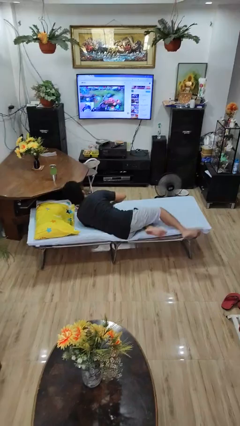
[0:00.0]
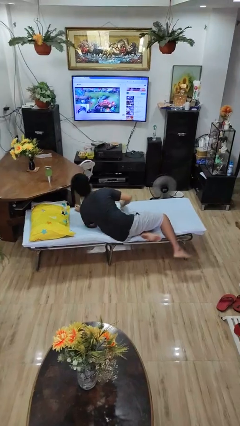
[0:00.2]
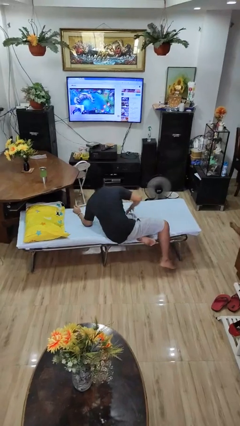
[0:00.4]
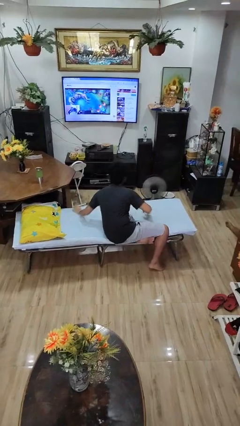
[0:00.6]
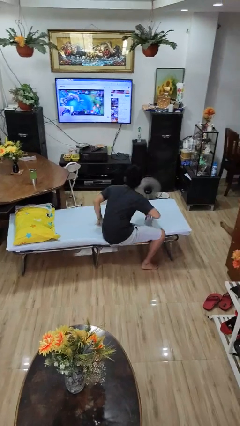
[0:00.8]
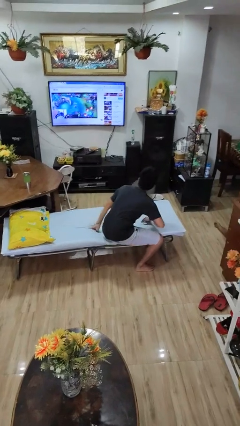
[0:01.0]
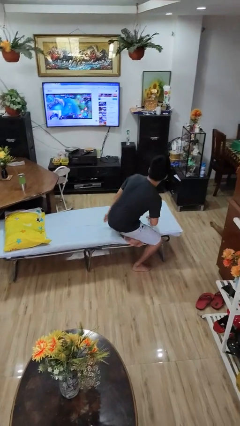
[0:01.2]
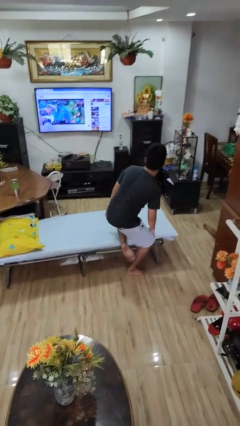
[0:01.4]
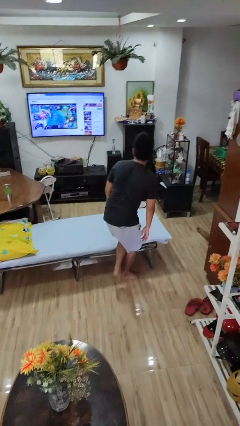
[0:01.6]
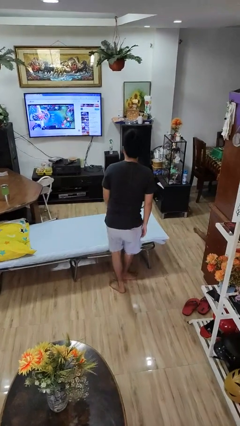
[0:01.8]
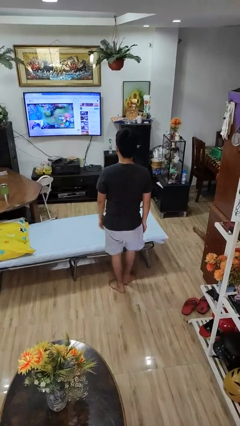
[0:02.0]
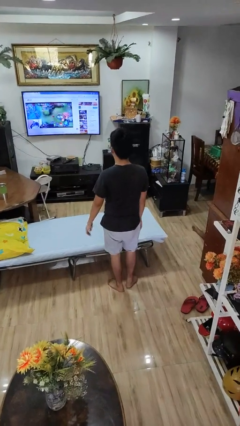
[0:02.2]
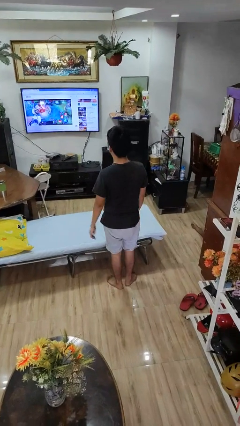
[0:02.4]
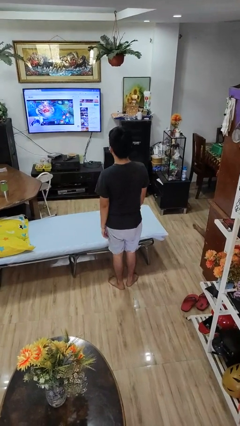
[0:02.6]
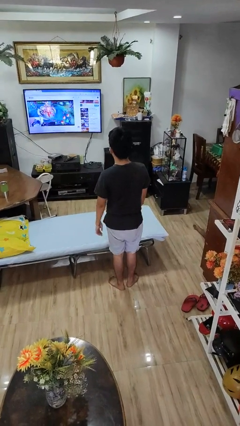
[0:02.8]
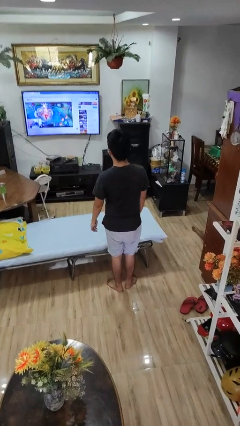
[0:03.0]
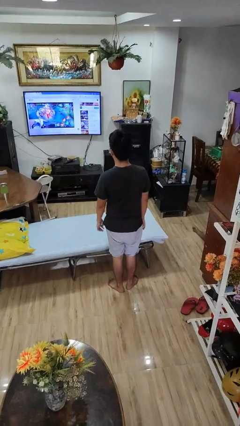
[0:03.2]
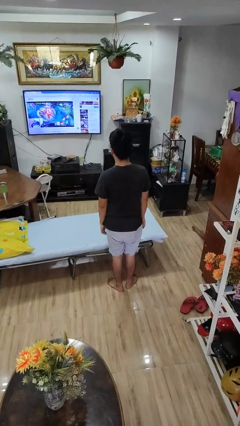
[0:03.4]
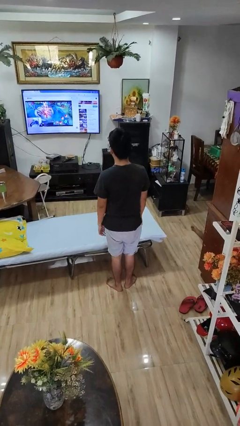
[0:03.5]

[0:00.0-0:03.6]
person stands up

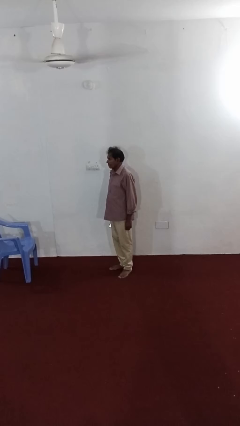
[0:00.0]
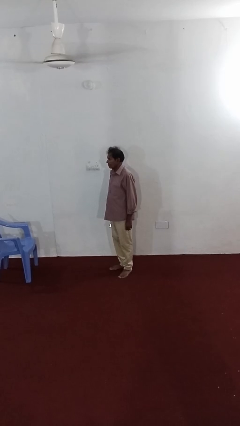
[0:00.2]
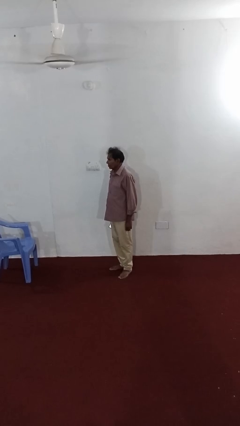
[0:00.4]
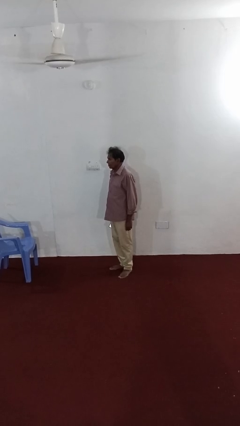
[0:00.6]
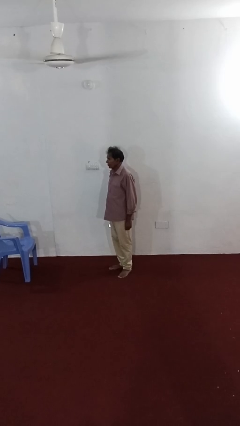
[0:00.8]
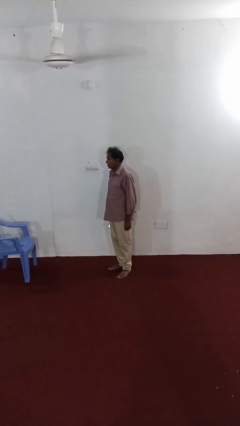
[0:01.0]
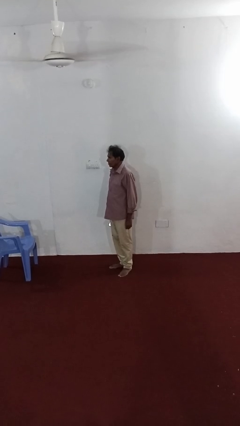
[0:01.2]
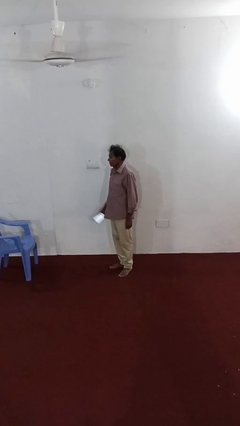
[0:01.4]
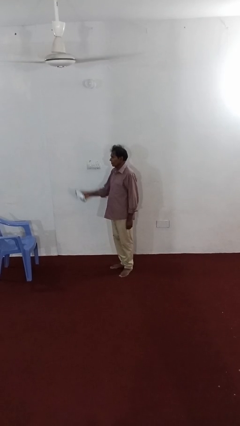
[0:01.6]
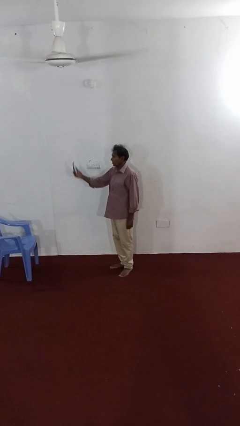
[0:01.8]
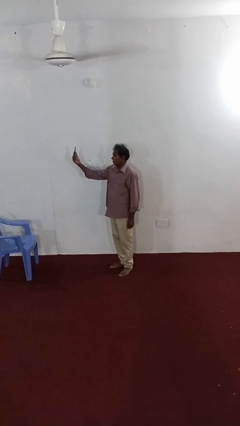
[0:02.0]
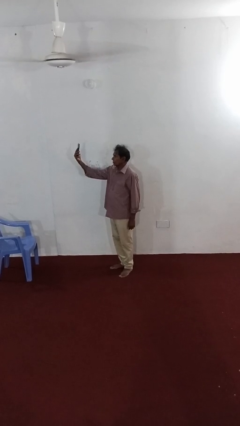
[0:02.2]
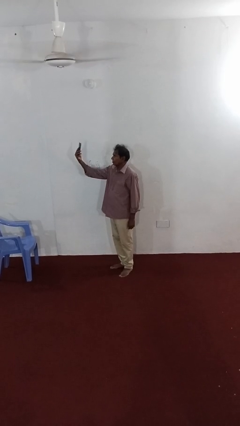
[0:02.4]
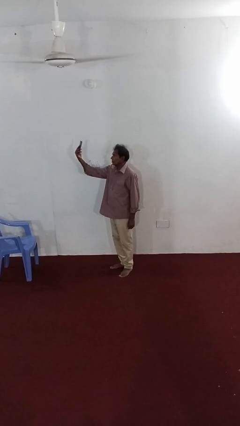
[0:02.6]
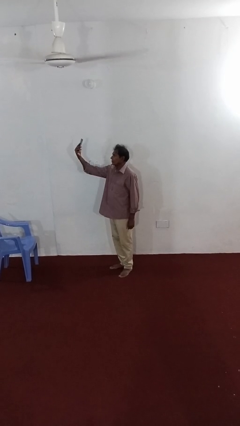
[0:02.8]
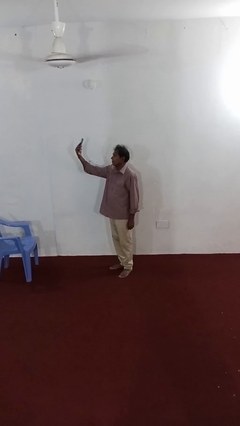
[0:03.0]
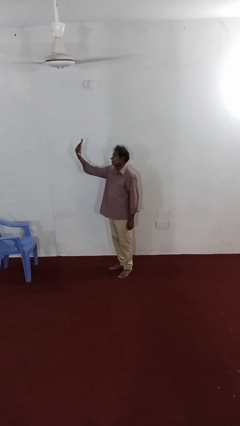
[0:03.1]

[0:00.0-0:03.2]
person takes selfie

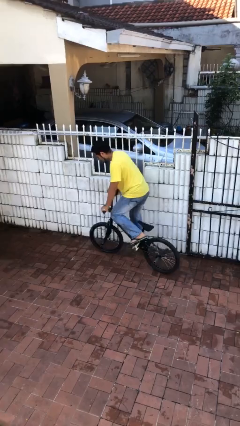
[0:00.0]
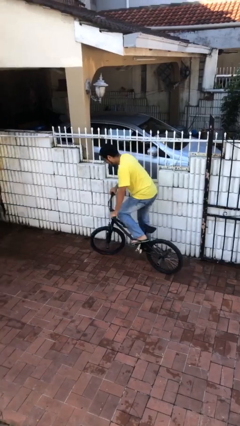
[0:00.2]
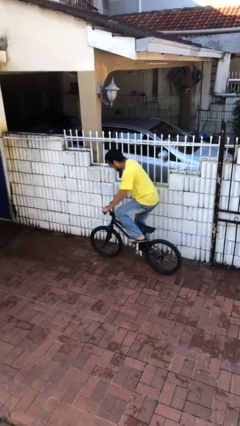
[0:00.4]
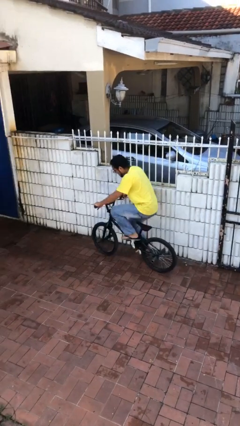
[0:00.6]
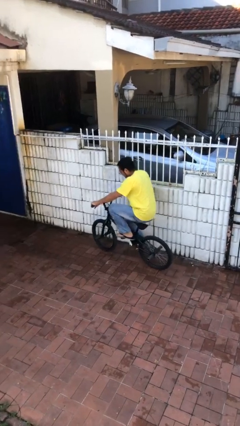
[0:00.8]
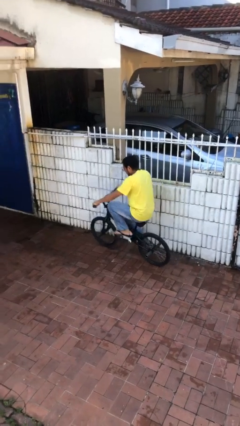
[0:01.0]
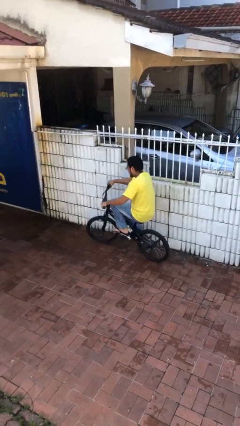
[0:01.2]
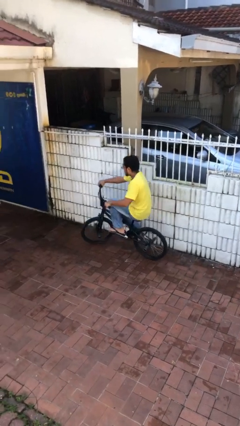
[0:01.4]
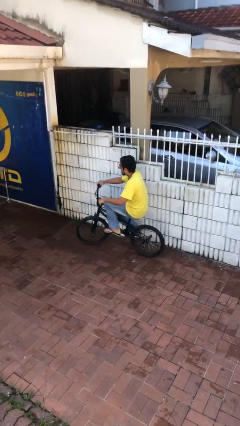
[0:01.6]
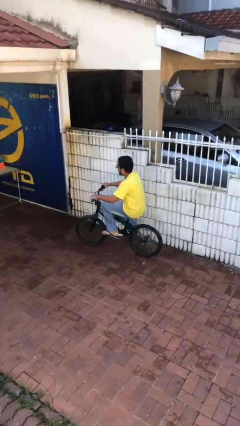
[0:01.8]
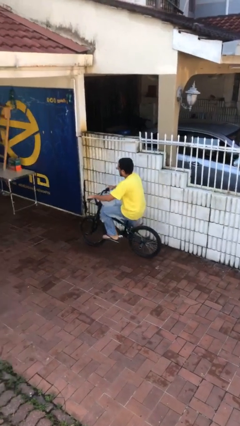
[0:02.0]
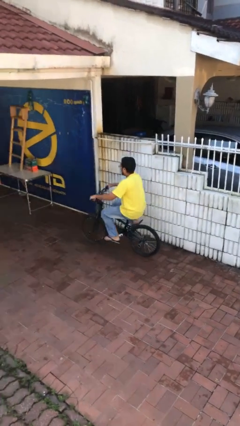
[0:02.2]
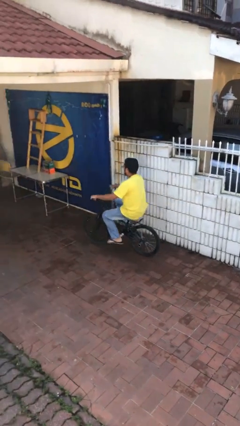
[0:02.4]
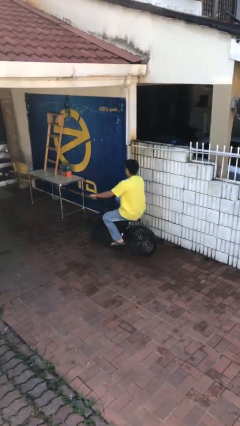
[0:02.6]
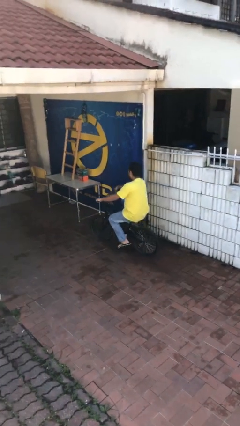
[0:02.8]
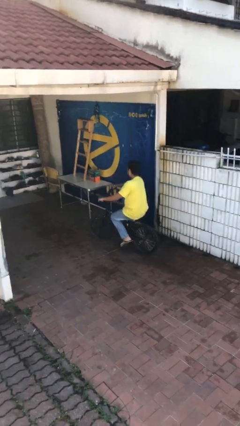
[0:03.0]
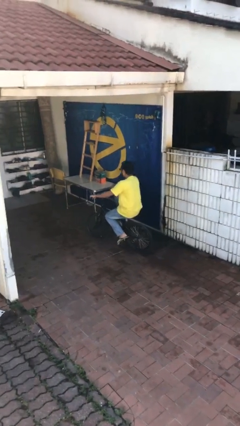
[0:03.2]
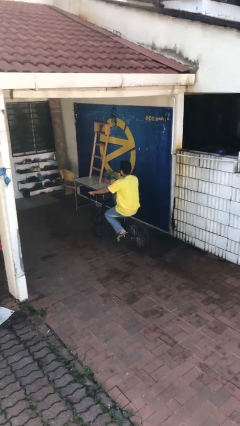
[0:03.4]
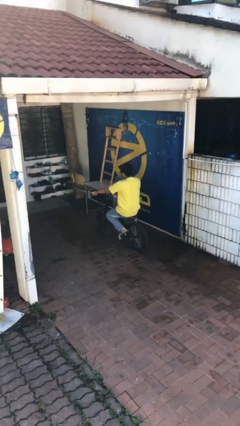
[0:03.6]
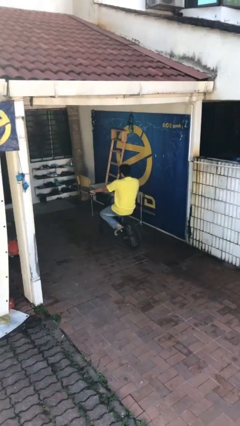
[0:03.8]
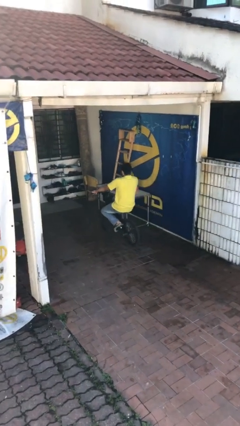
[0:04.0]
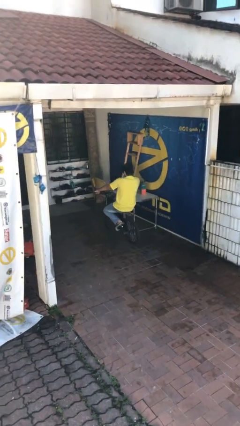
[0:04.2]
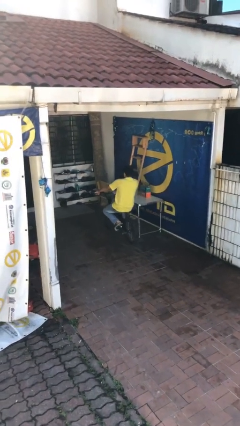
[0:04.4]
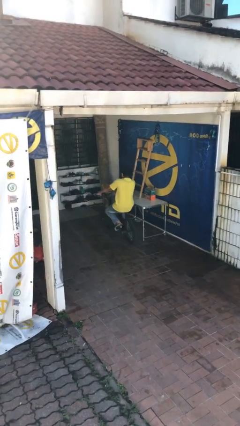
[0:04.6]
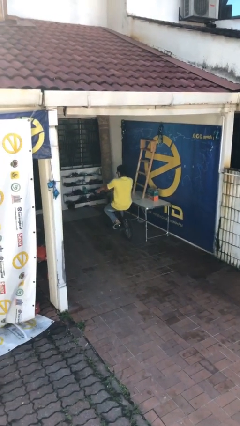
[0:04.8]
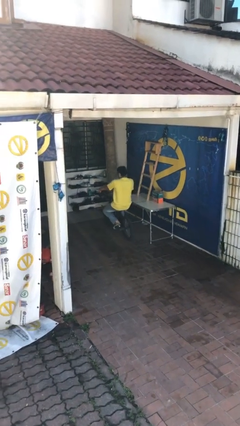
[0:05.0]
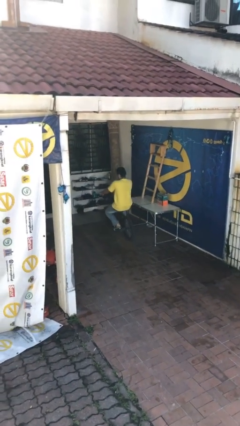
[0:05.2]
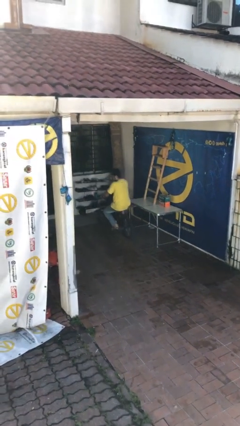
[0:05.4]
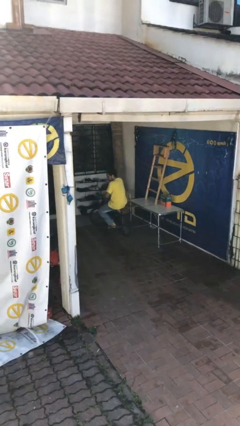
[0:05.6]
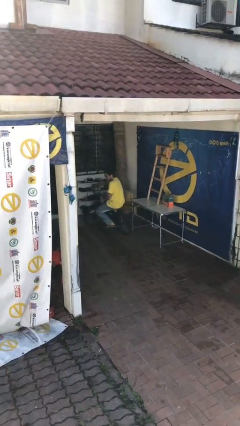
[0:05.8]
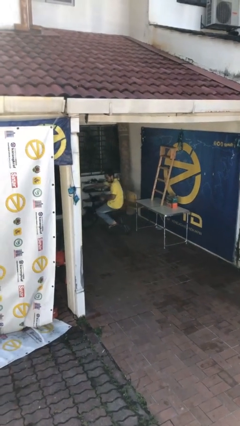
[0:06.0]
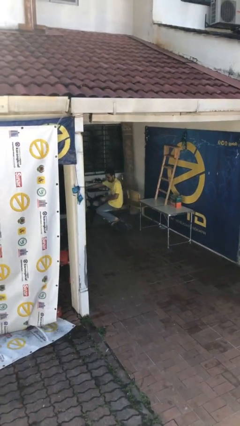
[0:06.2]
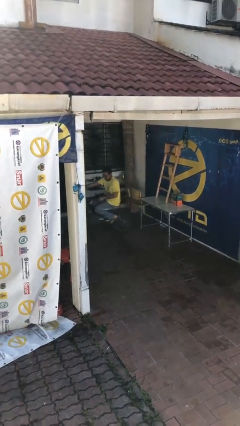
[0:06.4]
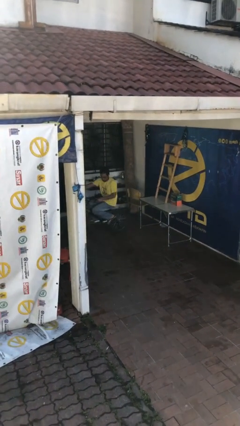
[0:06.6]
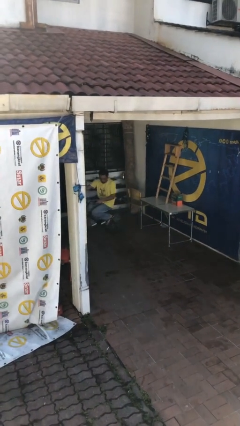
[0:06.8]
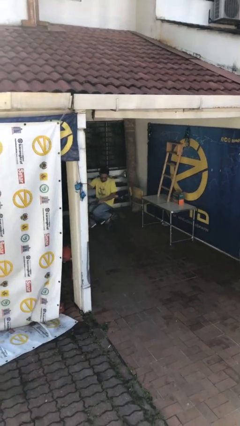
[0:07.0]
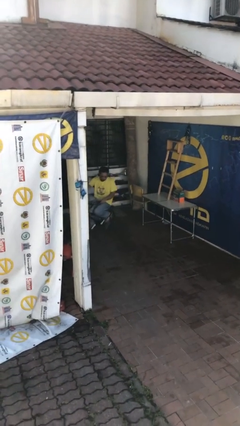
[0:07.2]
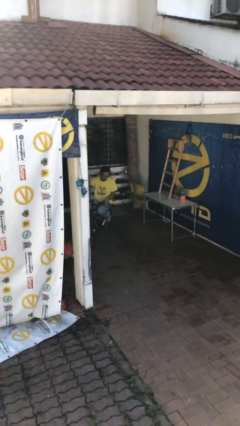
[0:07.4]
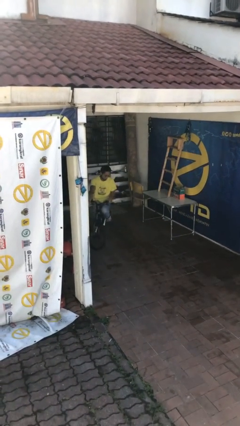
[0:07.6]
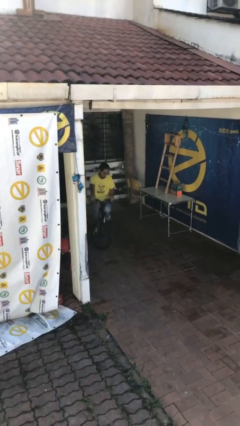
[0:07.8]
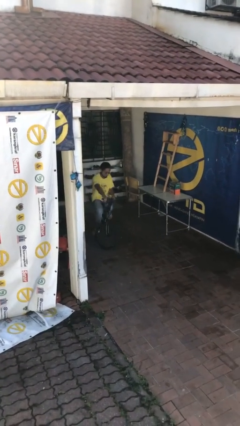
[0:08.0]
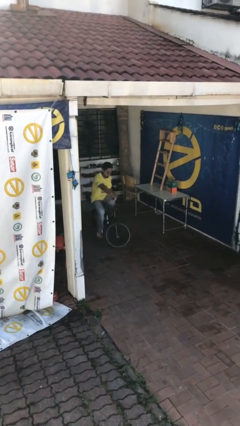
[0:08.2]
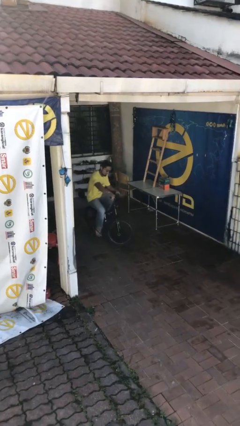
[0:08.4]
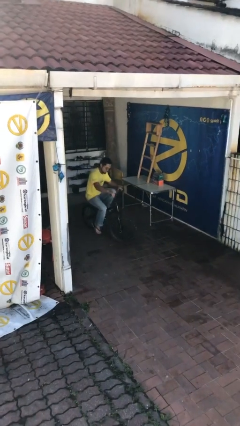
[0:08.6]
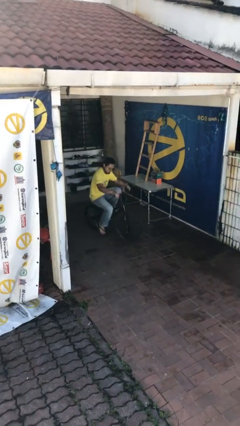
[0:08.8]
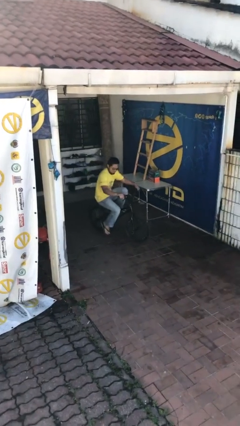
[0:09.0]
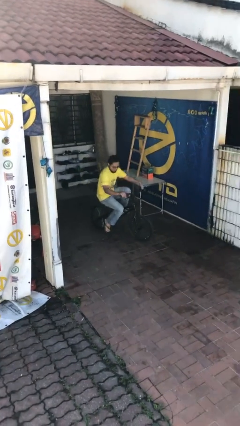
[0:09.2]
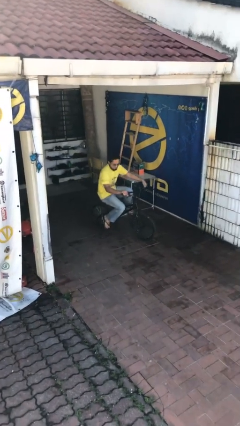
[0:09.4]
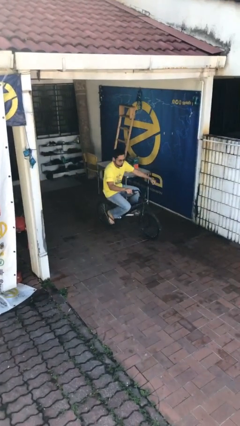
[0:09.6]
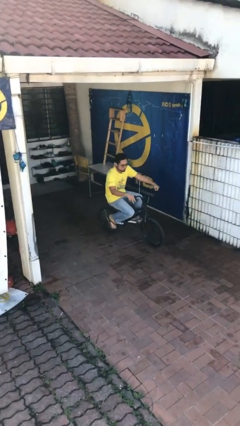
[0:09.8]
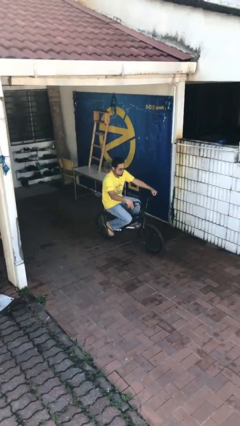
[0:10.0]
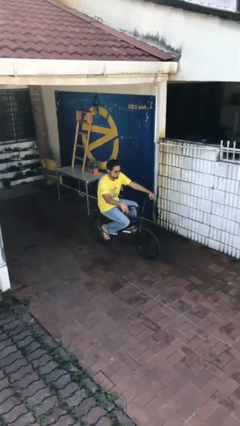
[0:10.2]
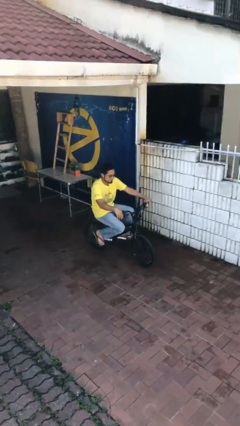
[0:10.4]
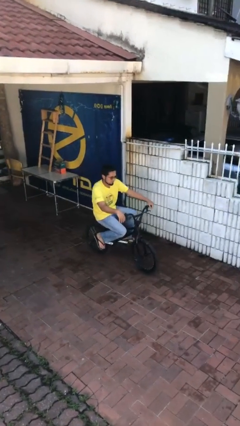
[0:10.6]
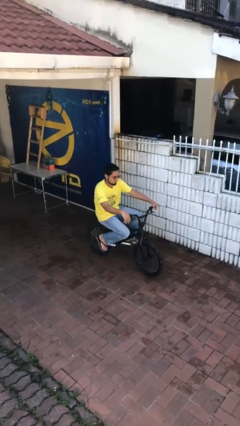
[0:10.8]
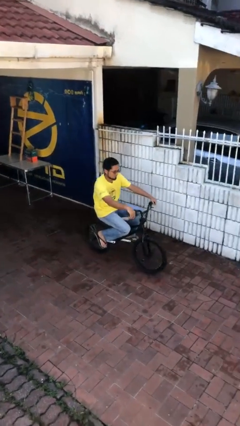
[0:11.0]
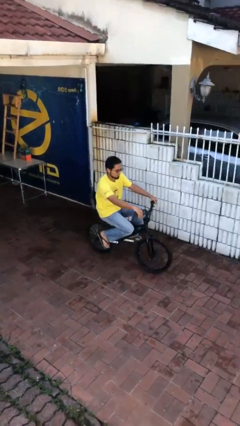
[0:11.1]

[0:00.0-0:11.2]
person rides bicycle
